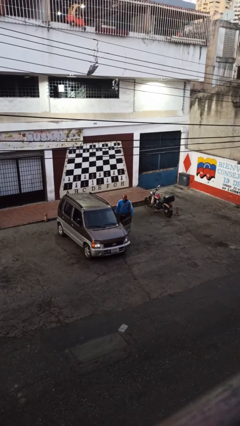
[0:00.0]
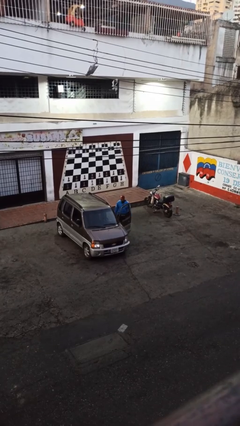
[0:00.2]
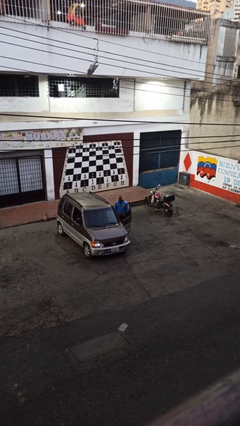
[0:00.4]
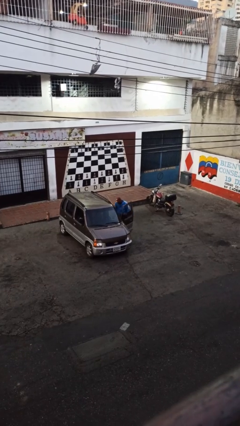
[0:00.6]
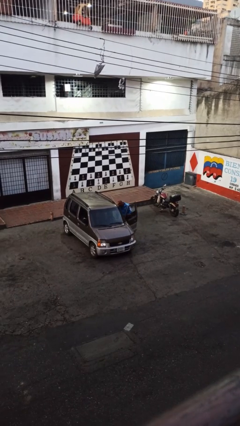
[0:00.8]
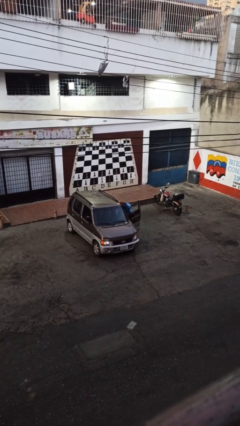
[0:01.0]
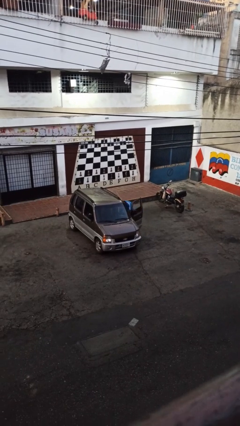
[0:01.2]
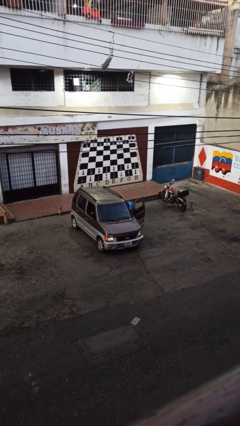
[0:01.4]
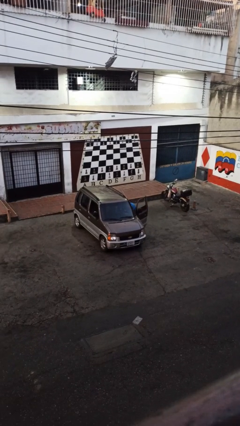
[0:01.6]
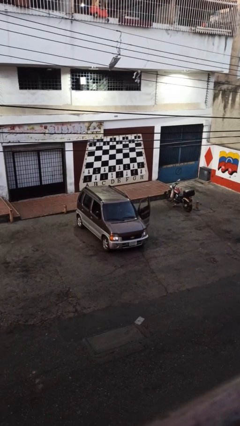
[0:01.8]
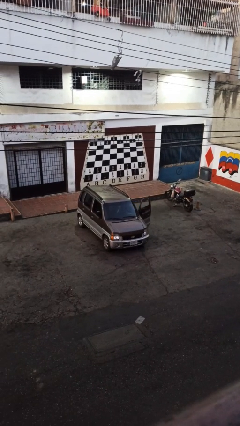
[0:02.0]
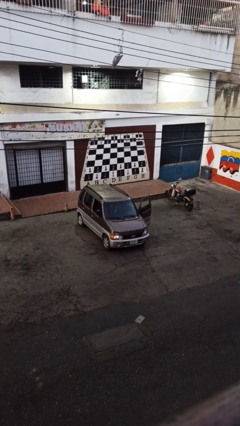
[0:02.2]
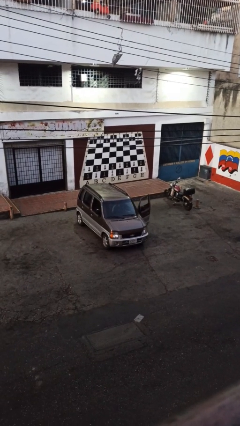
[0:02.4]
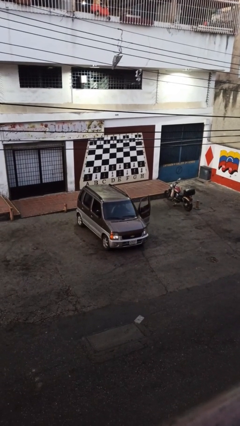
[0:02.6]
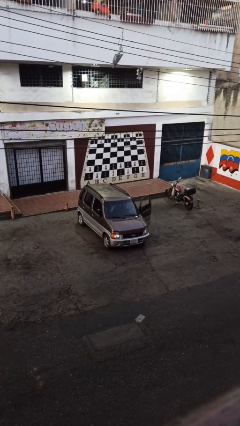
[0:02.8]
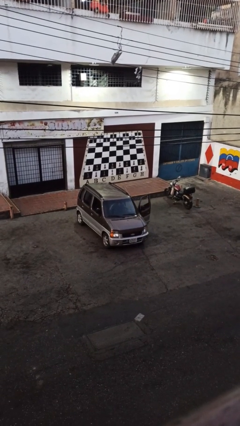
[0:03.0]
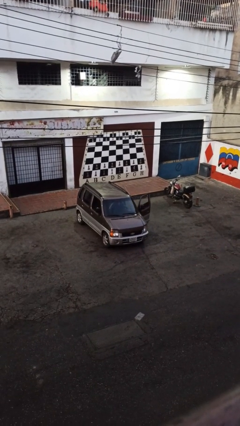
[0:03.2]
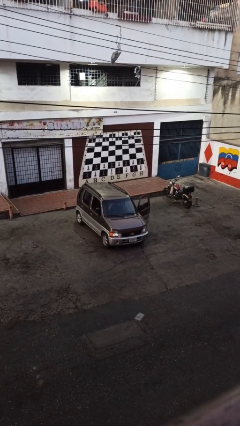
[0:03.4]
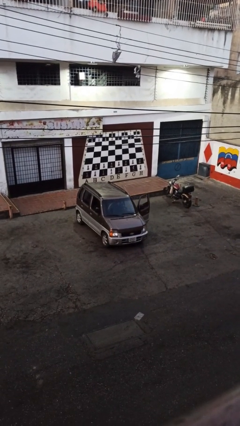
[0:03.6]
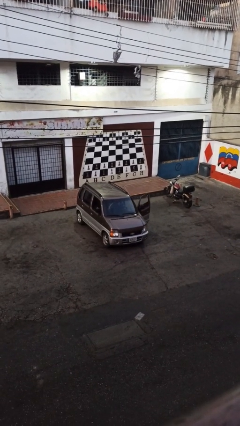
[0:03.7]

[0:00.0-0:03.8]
person enters car

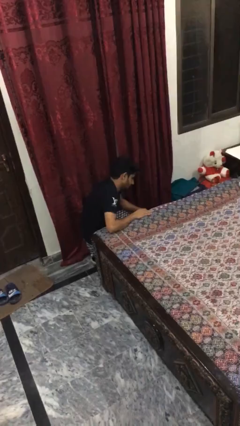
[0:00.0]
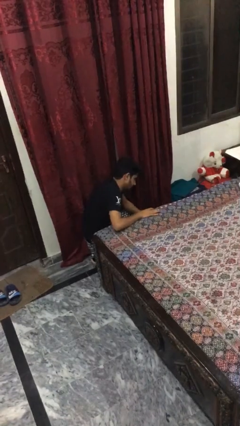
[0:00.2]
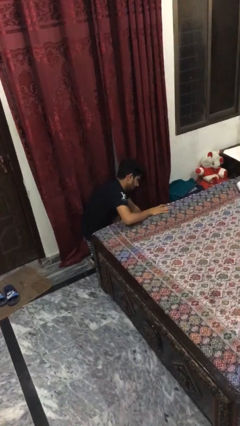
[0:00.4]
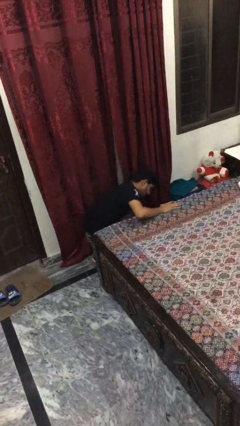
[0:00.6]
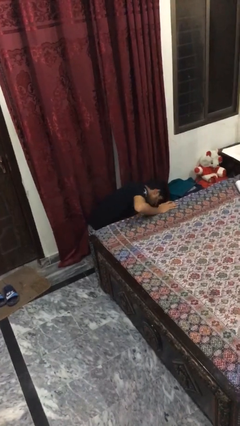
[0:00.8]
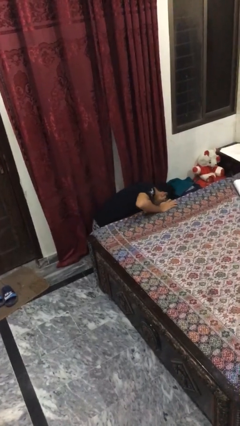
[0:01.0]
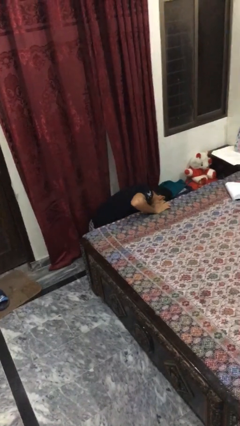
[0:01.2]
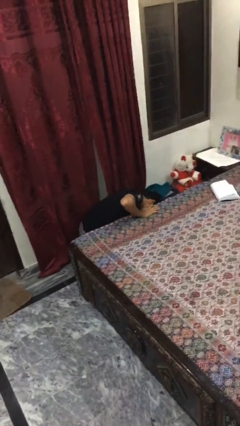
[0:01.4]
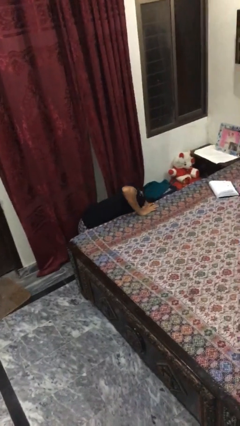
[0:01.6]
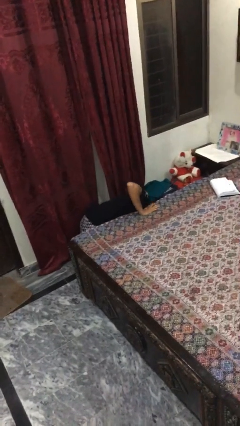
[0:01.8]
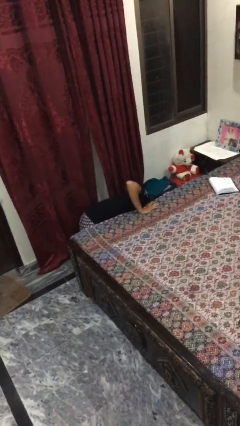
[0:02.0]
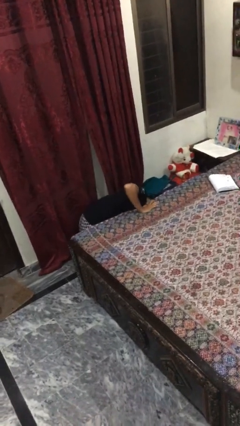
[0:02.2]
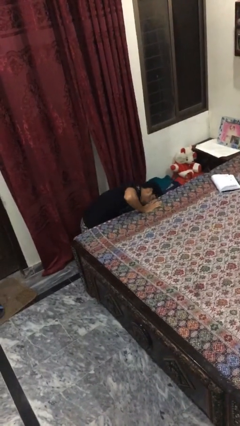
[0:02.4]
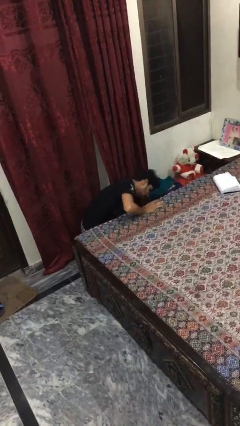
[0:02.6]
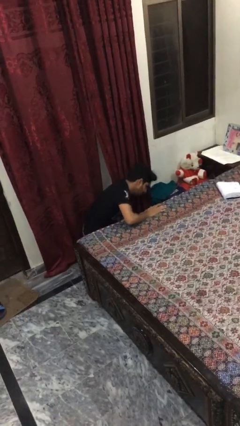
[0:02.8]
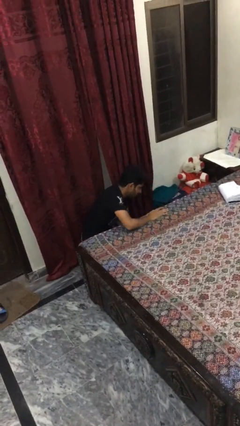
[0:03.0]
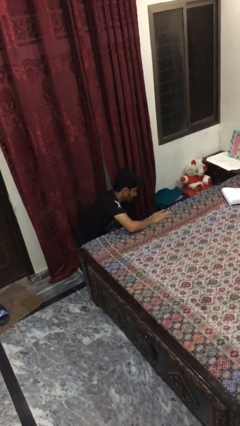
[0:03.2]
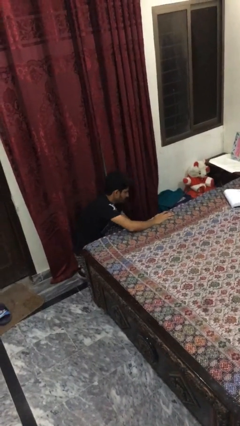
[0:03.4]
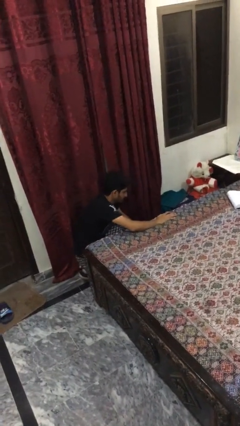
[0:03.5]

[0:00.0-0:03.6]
person searches under bed

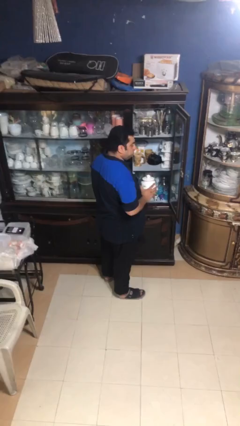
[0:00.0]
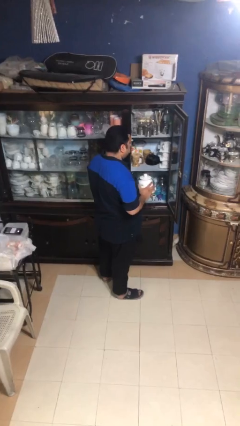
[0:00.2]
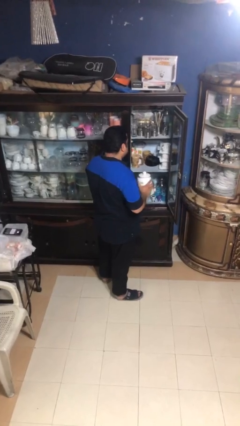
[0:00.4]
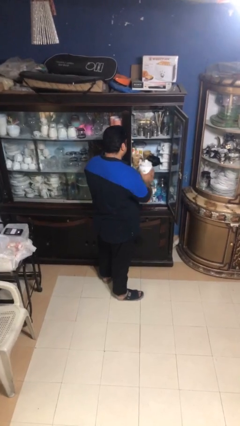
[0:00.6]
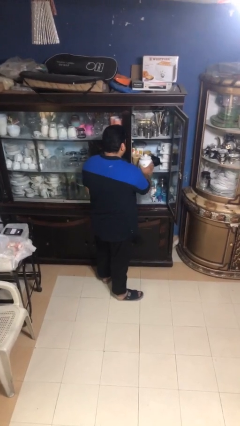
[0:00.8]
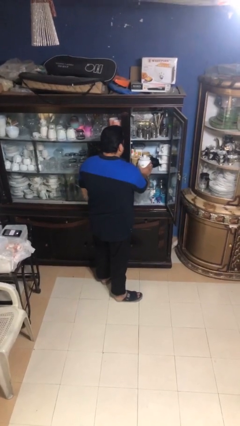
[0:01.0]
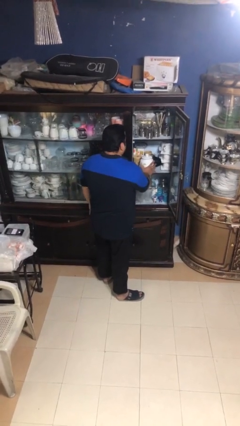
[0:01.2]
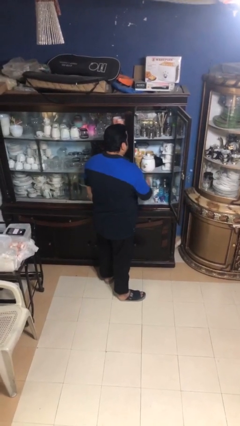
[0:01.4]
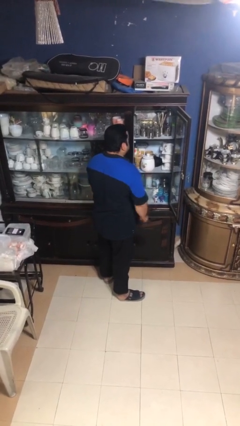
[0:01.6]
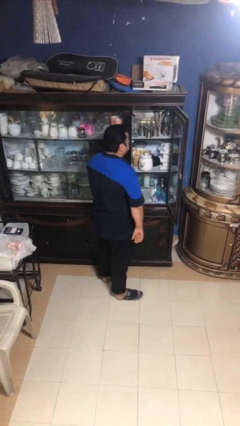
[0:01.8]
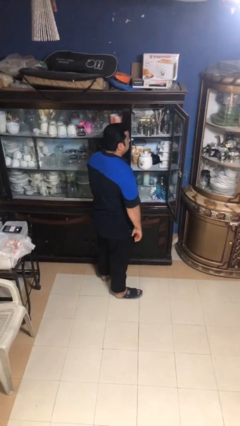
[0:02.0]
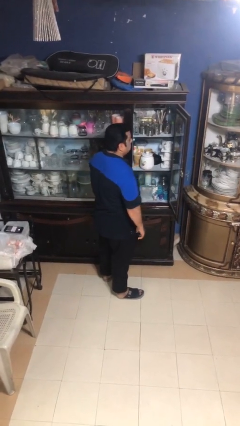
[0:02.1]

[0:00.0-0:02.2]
person puts down object into cabinet

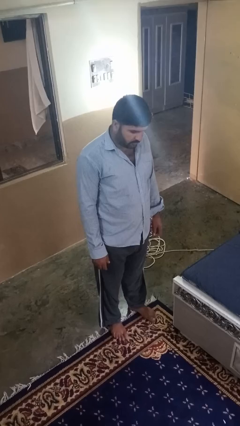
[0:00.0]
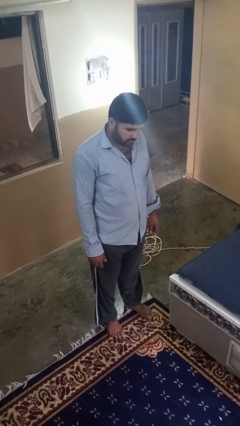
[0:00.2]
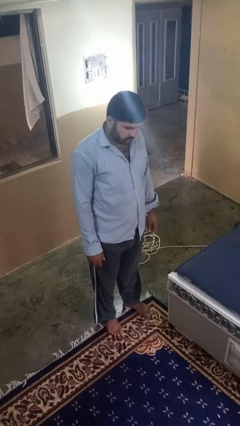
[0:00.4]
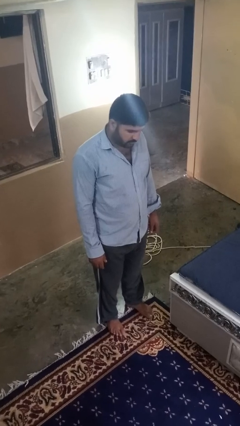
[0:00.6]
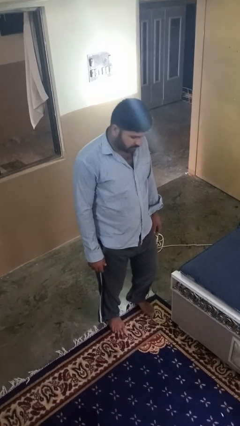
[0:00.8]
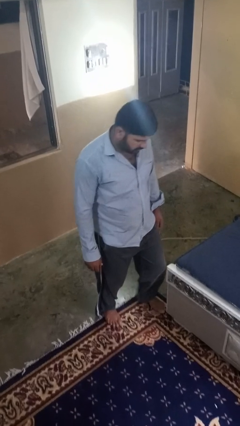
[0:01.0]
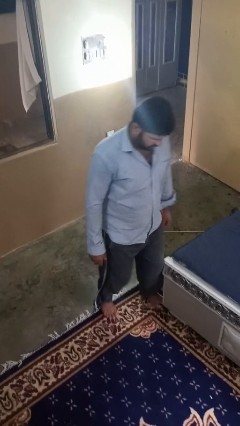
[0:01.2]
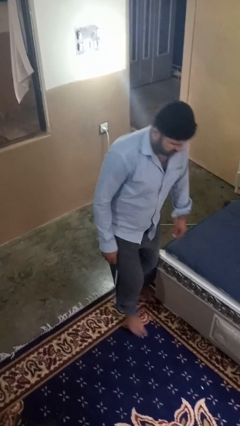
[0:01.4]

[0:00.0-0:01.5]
person trips on object on floor

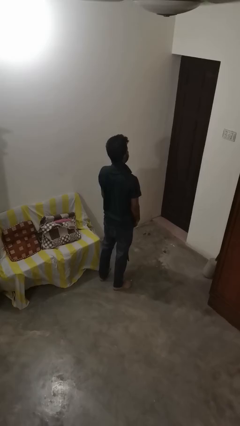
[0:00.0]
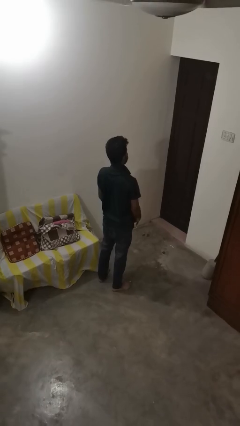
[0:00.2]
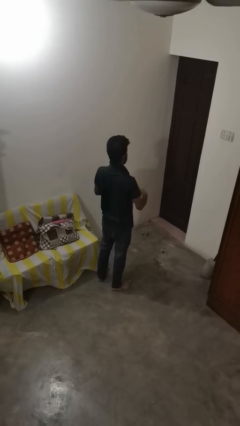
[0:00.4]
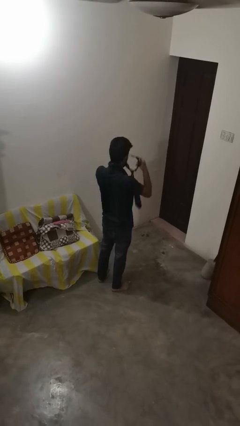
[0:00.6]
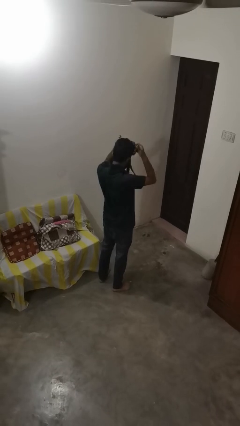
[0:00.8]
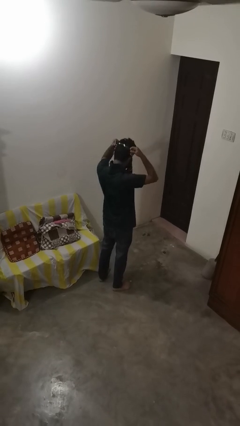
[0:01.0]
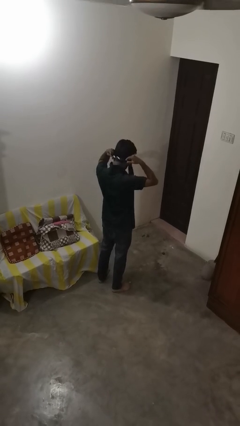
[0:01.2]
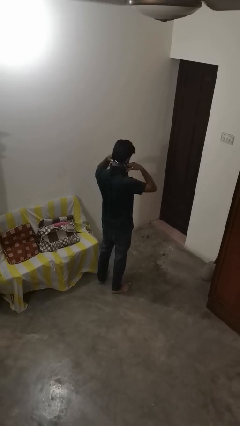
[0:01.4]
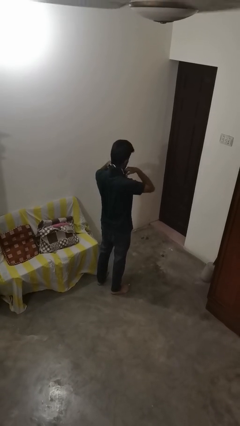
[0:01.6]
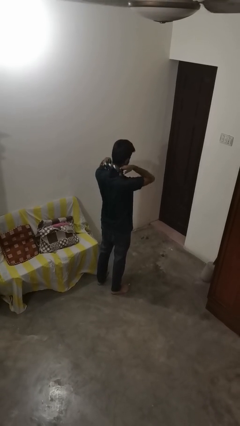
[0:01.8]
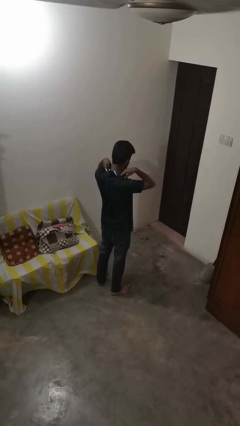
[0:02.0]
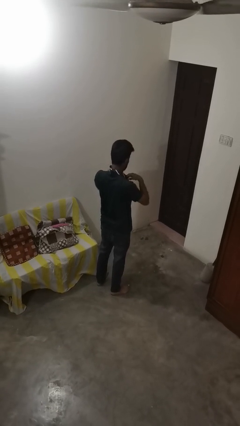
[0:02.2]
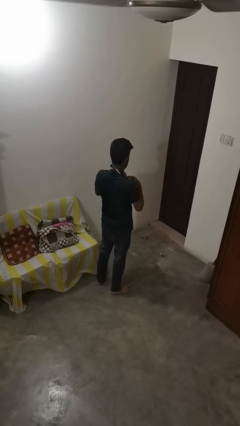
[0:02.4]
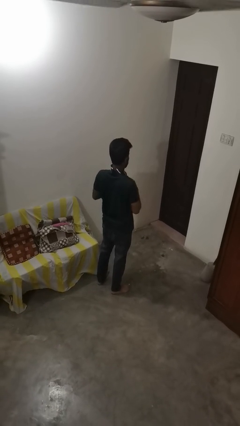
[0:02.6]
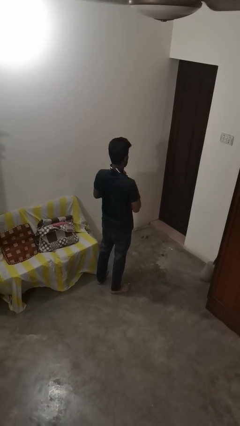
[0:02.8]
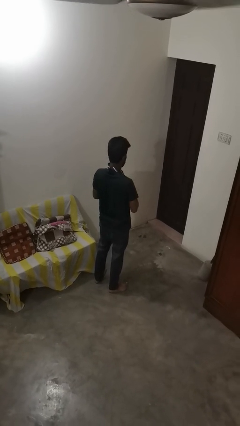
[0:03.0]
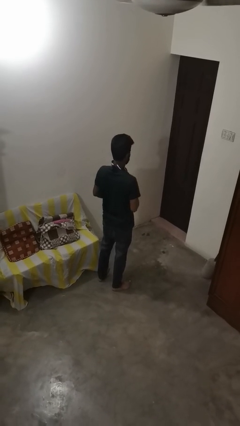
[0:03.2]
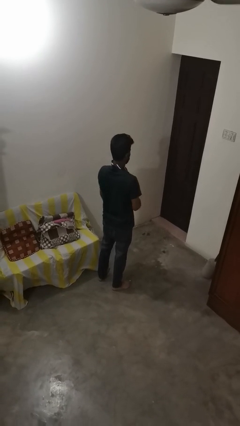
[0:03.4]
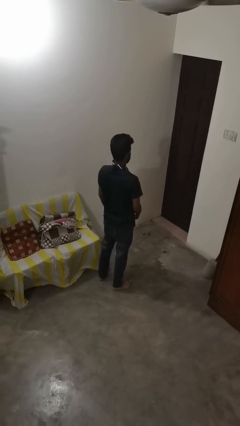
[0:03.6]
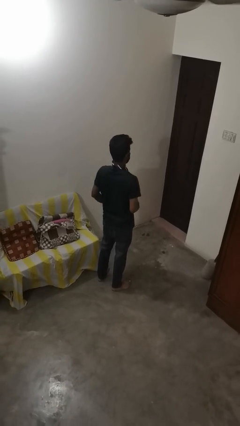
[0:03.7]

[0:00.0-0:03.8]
person puts on necktie

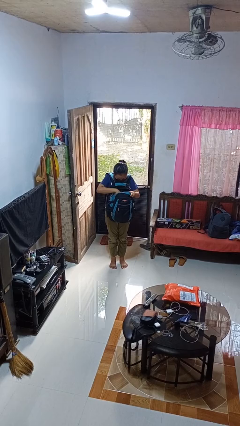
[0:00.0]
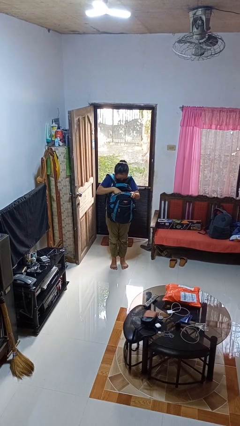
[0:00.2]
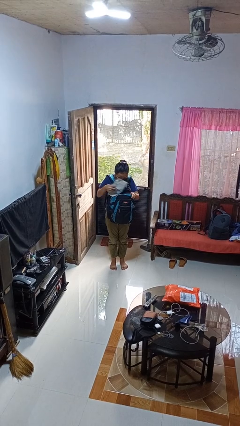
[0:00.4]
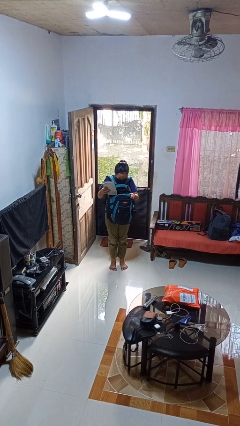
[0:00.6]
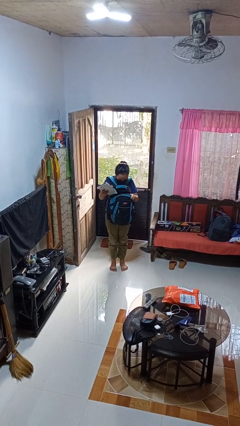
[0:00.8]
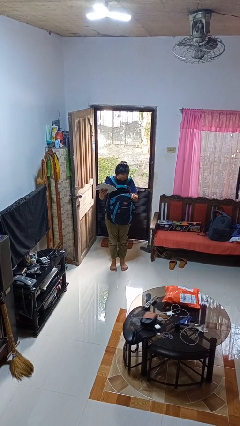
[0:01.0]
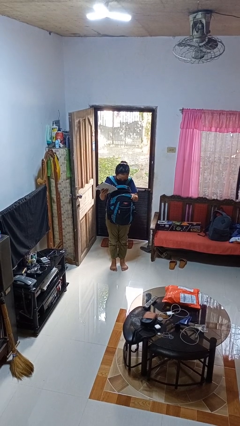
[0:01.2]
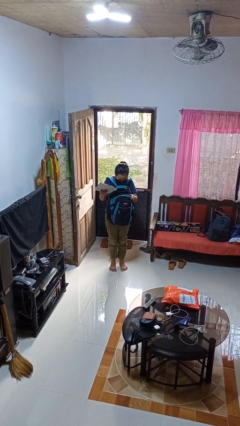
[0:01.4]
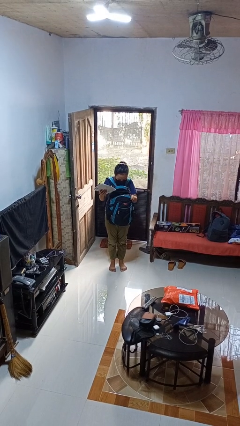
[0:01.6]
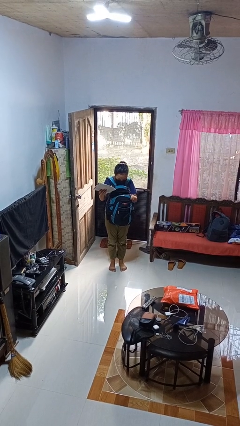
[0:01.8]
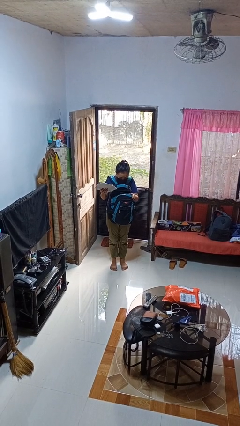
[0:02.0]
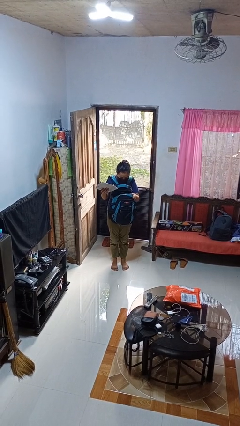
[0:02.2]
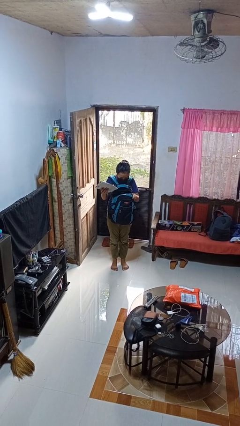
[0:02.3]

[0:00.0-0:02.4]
person takes object from backpack

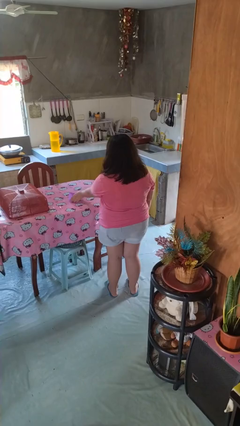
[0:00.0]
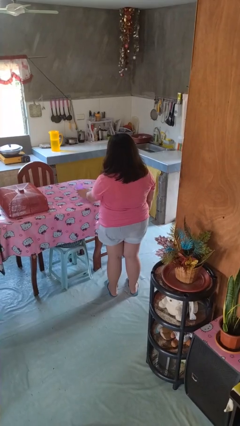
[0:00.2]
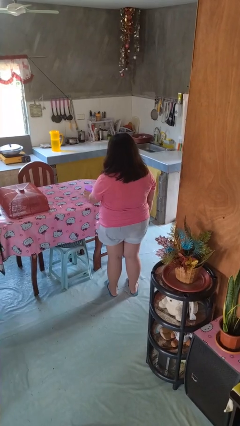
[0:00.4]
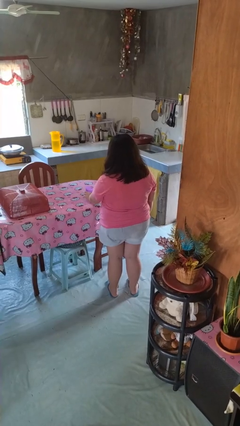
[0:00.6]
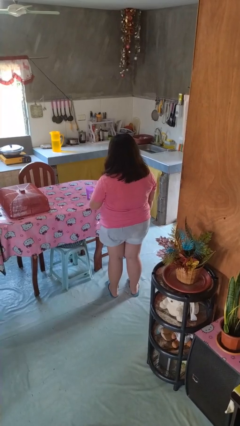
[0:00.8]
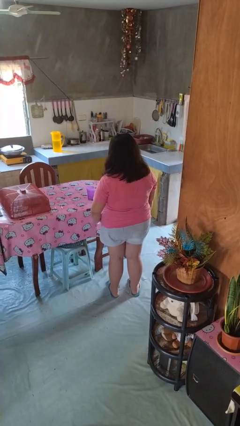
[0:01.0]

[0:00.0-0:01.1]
person sets upright glass
